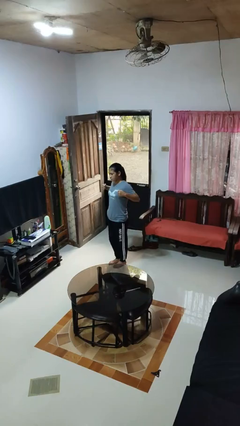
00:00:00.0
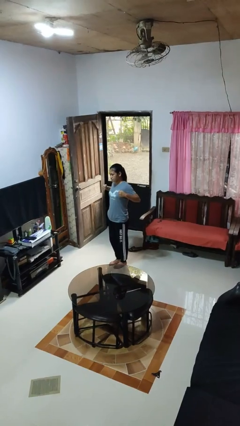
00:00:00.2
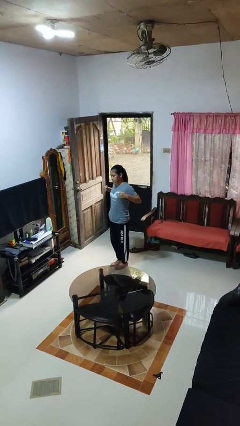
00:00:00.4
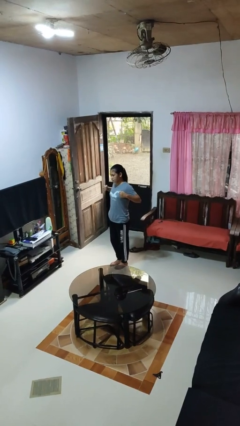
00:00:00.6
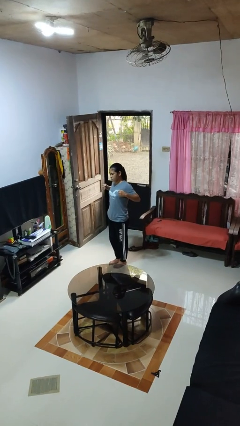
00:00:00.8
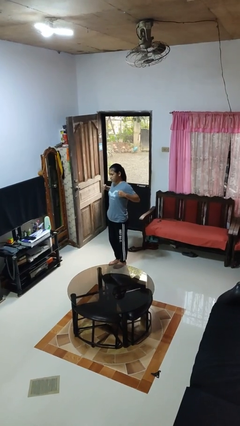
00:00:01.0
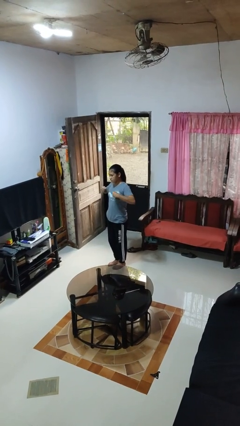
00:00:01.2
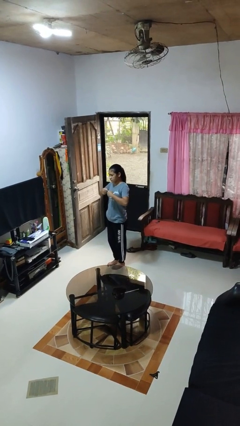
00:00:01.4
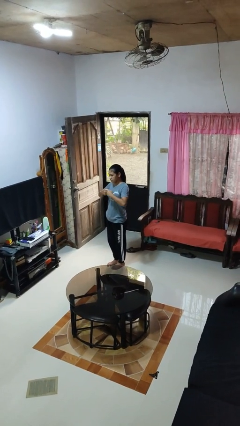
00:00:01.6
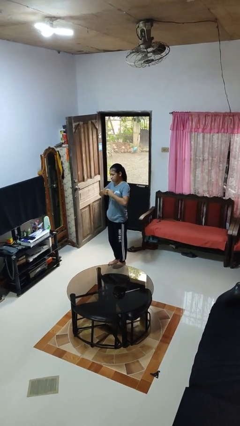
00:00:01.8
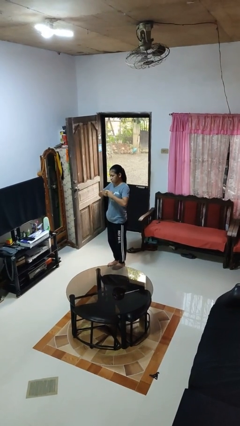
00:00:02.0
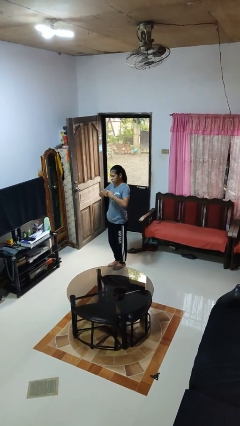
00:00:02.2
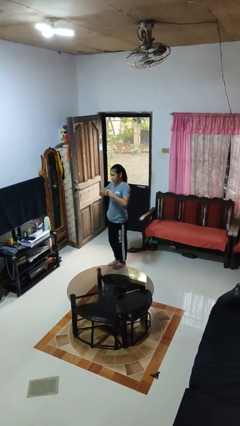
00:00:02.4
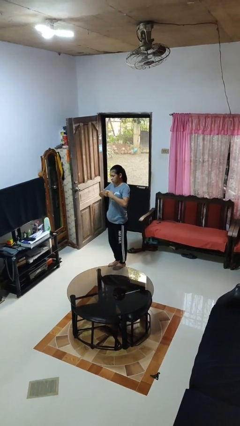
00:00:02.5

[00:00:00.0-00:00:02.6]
person gestures zoom out

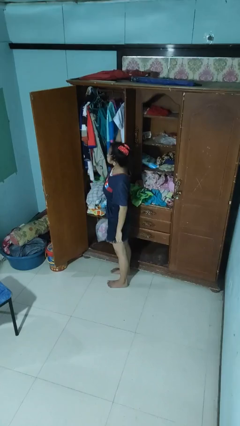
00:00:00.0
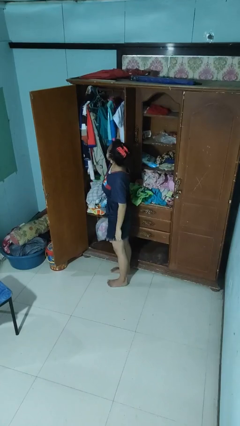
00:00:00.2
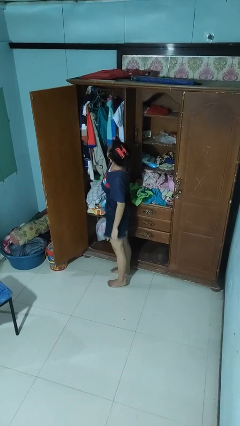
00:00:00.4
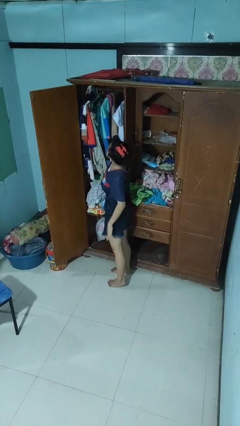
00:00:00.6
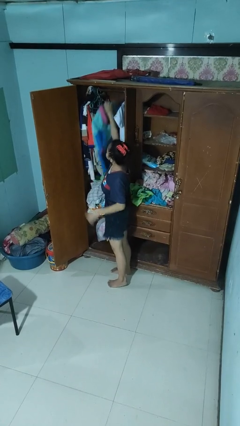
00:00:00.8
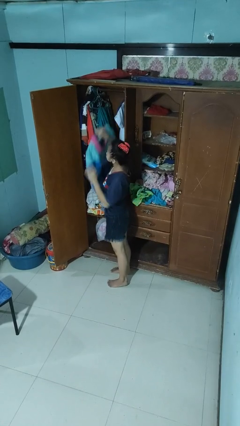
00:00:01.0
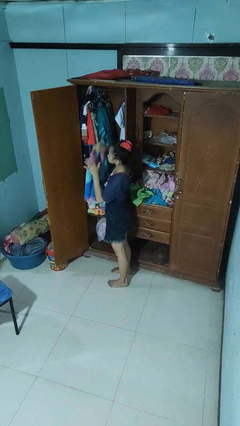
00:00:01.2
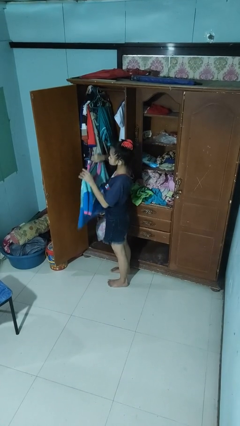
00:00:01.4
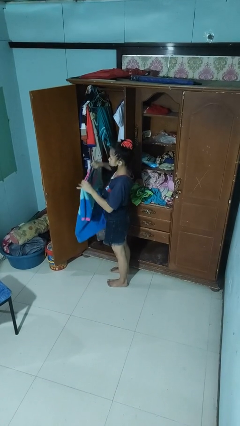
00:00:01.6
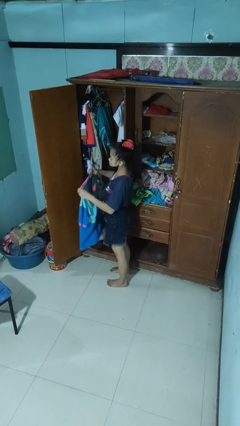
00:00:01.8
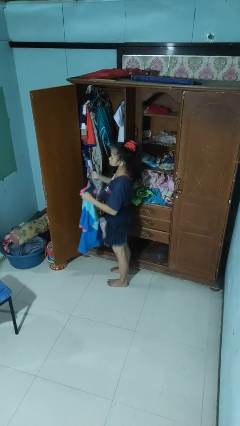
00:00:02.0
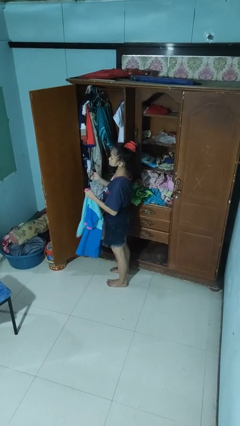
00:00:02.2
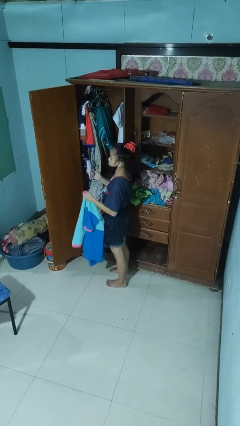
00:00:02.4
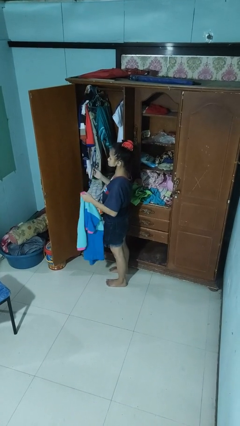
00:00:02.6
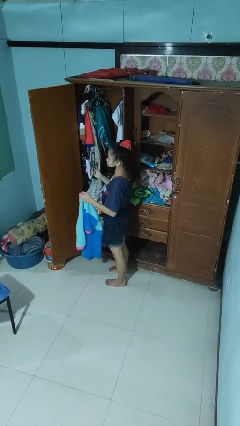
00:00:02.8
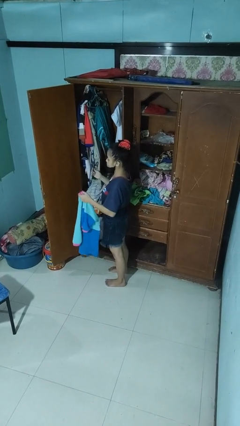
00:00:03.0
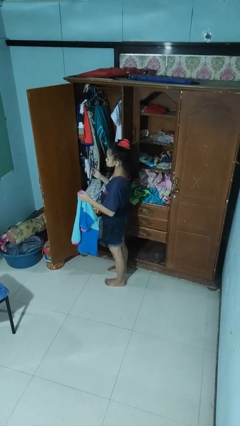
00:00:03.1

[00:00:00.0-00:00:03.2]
person takes clothes from closet

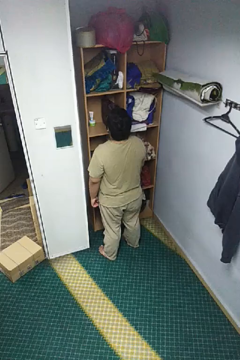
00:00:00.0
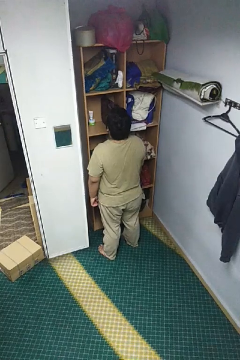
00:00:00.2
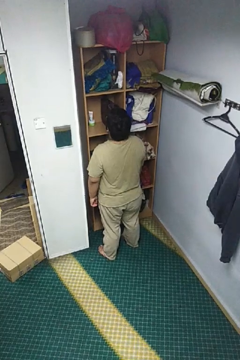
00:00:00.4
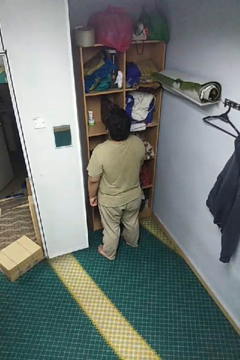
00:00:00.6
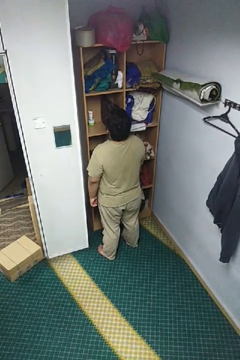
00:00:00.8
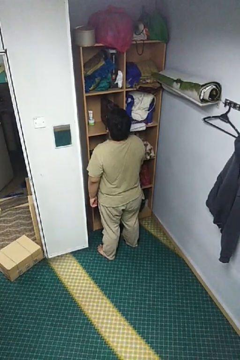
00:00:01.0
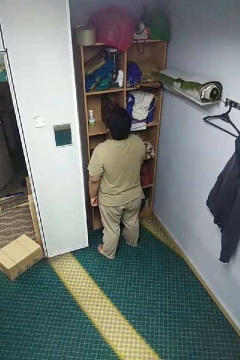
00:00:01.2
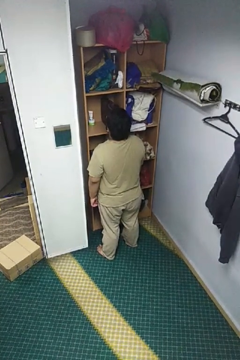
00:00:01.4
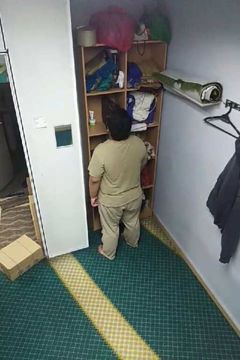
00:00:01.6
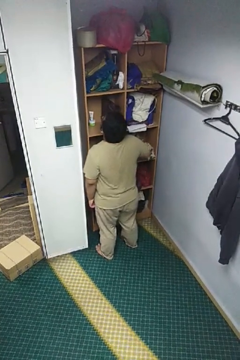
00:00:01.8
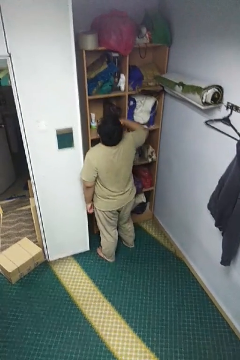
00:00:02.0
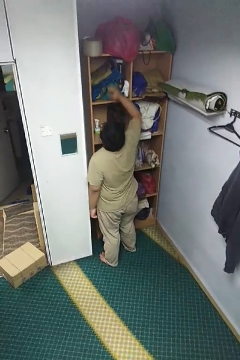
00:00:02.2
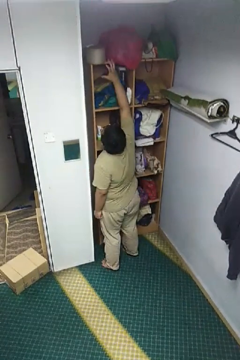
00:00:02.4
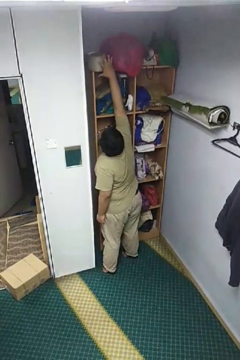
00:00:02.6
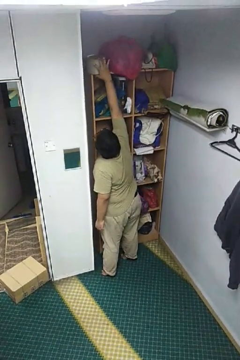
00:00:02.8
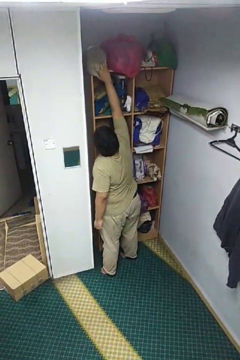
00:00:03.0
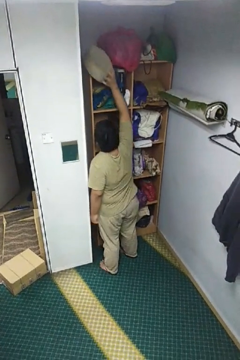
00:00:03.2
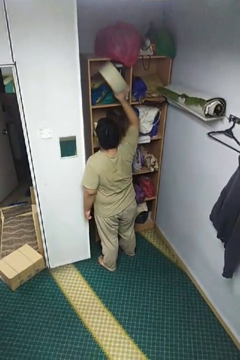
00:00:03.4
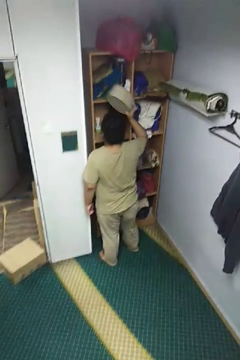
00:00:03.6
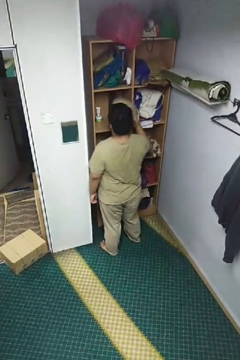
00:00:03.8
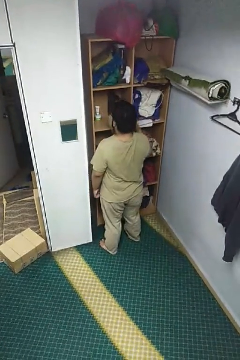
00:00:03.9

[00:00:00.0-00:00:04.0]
person picks up object from shelf

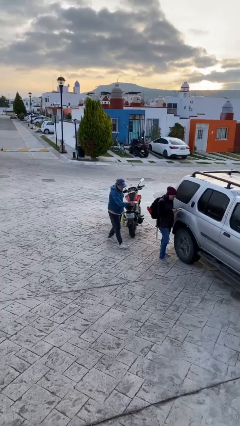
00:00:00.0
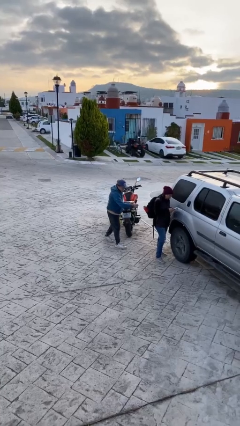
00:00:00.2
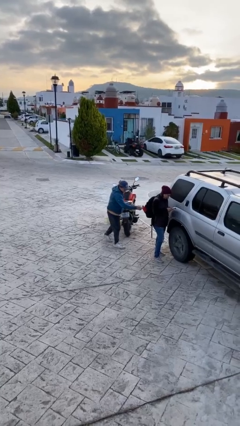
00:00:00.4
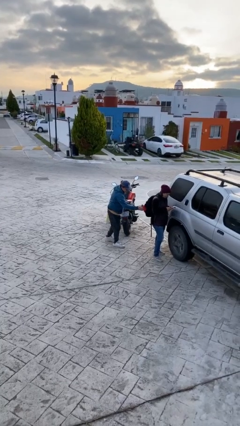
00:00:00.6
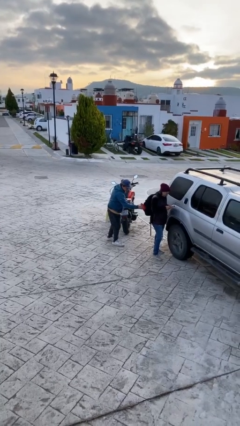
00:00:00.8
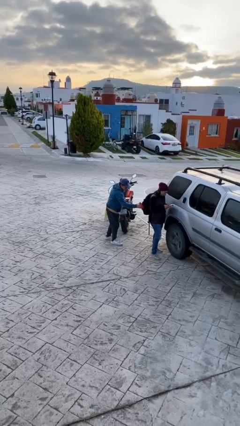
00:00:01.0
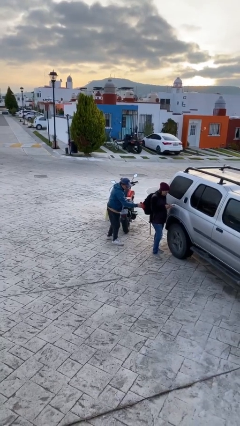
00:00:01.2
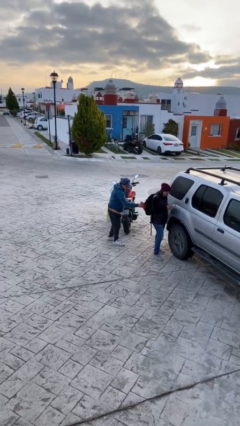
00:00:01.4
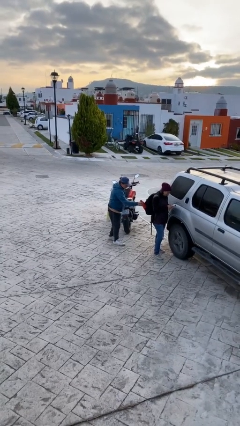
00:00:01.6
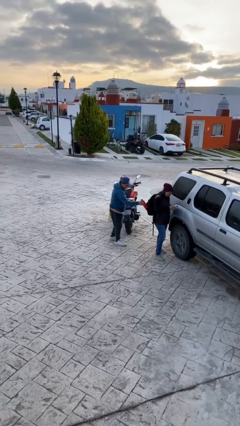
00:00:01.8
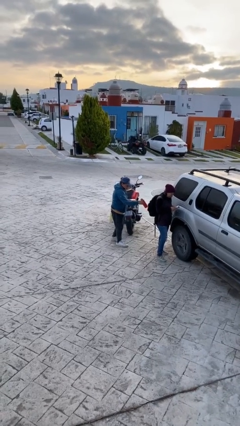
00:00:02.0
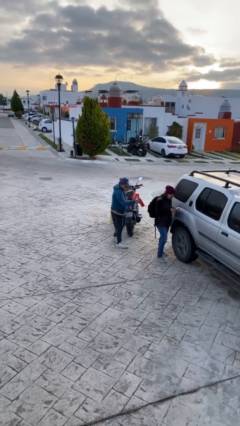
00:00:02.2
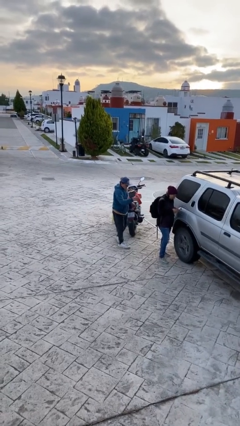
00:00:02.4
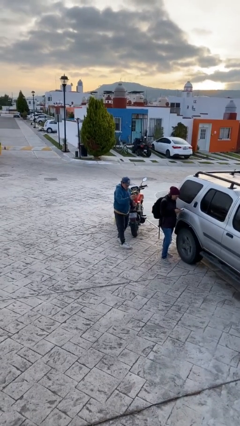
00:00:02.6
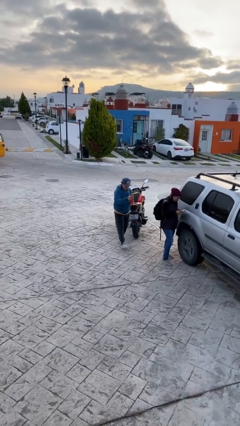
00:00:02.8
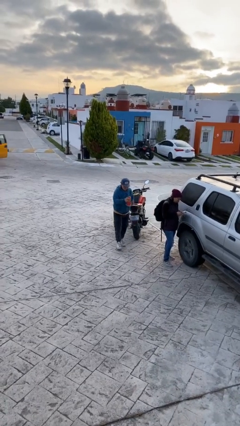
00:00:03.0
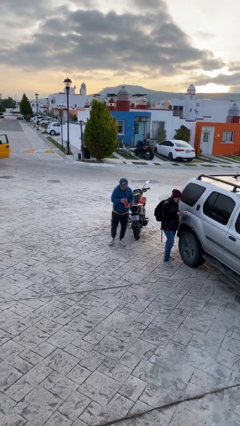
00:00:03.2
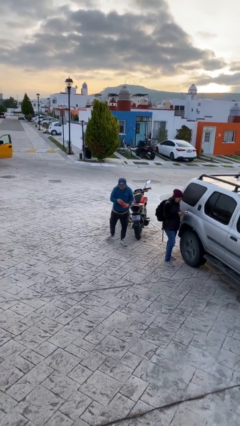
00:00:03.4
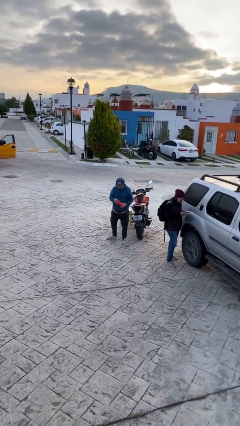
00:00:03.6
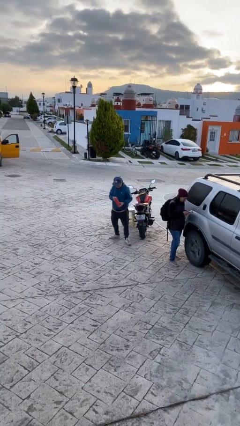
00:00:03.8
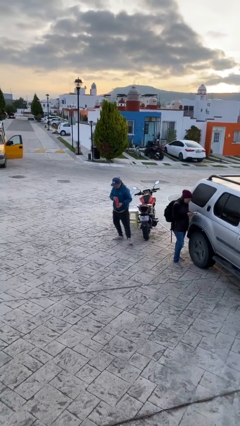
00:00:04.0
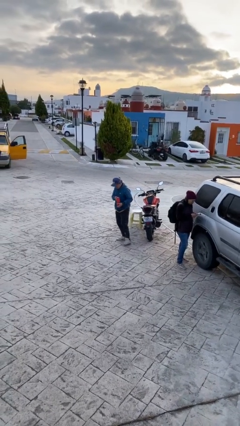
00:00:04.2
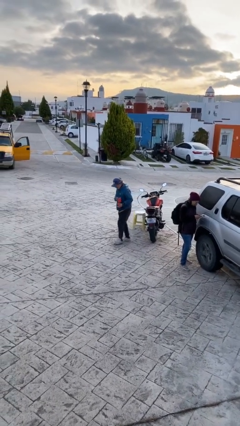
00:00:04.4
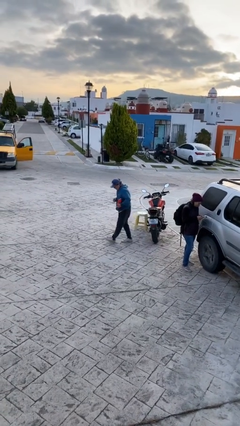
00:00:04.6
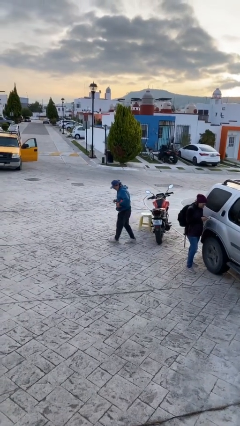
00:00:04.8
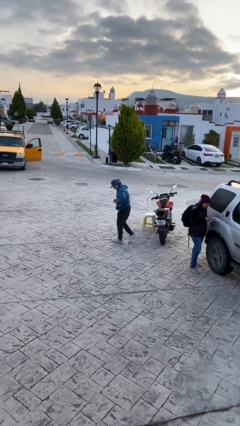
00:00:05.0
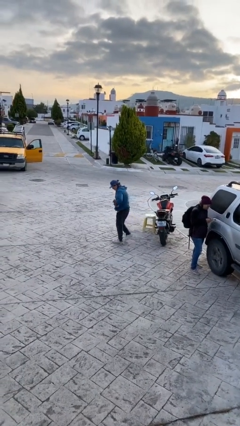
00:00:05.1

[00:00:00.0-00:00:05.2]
person steals object from person

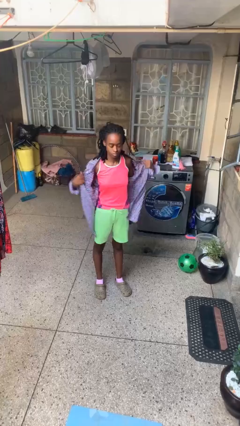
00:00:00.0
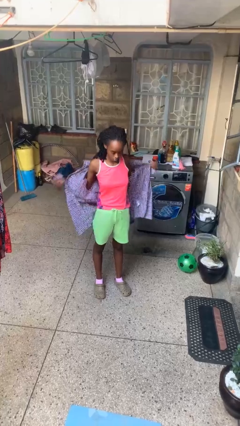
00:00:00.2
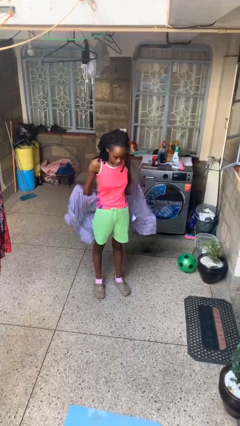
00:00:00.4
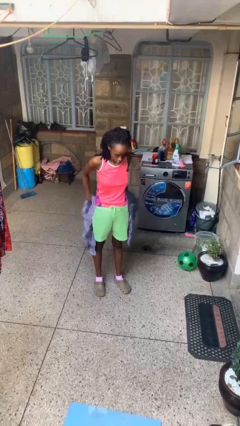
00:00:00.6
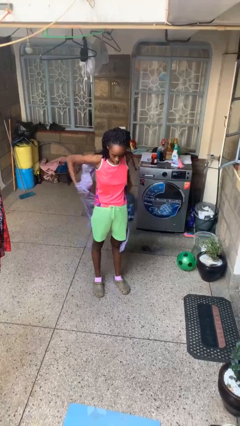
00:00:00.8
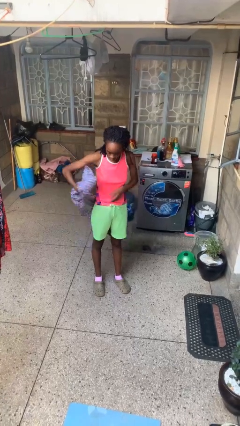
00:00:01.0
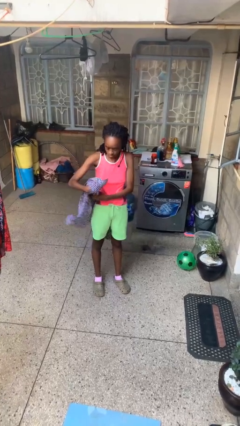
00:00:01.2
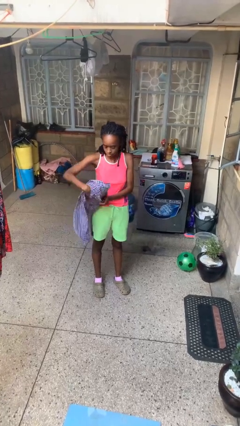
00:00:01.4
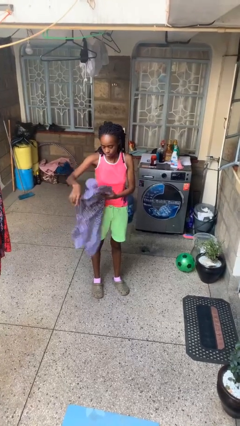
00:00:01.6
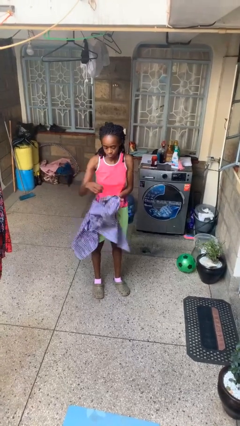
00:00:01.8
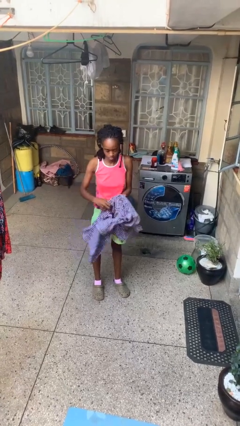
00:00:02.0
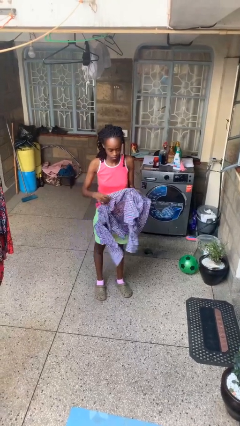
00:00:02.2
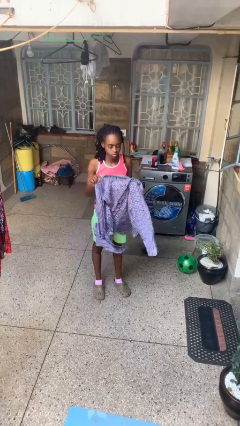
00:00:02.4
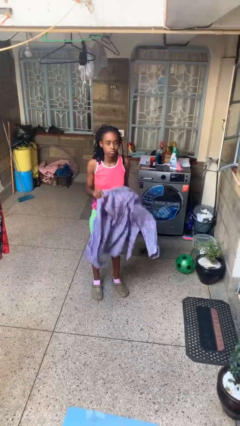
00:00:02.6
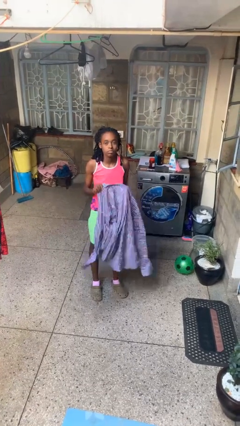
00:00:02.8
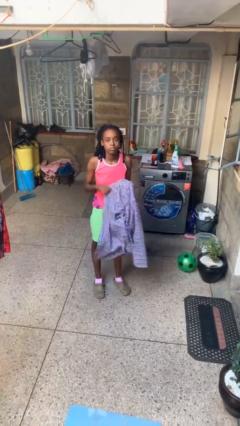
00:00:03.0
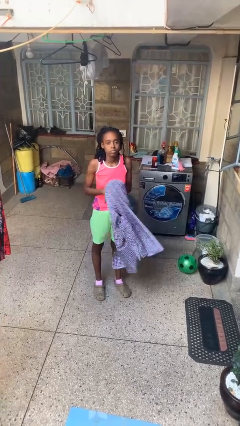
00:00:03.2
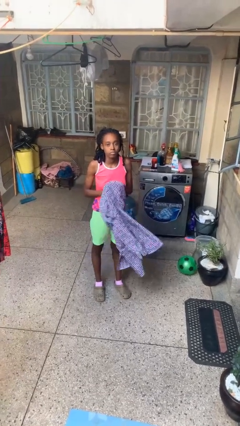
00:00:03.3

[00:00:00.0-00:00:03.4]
person takes off shirt
